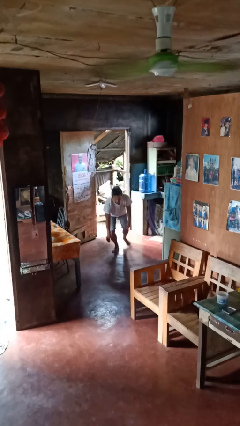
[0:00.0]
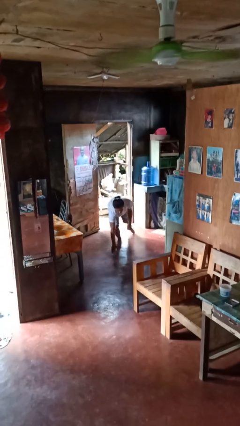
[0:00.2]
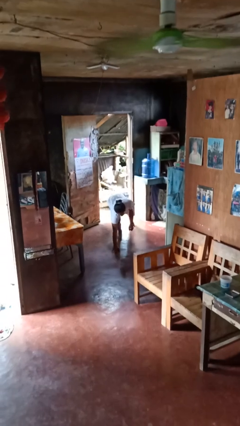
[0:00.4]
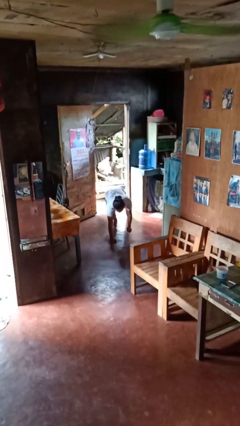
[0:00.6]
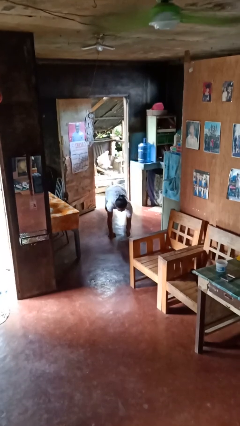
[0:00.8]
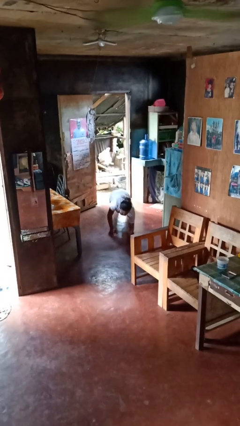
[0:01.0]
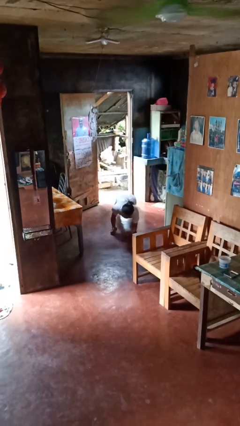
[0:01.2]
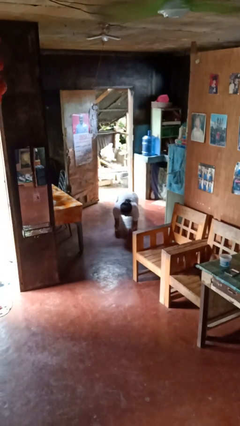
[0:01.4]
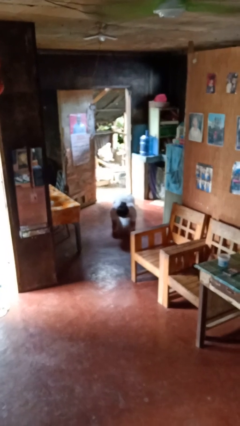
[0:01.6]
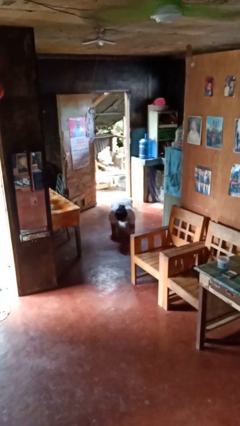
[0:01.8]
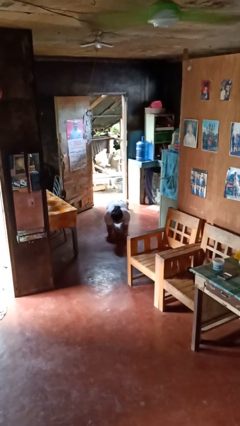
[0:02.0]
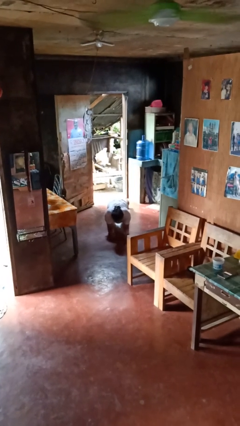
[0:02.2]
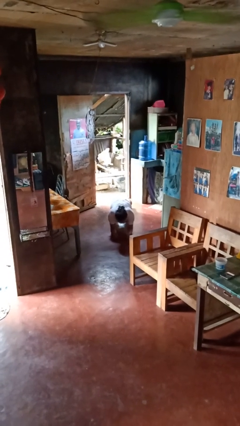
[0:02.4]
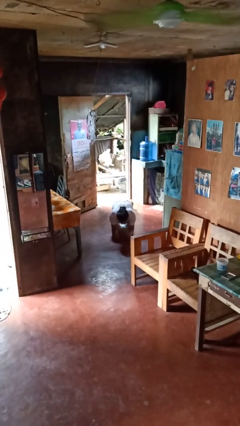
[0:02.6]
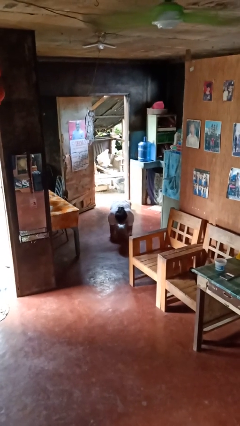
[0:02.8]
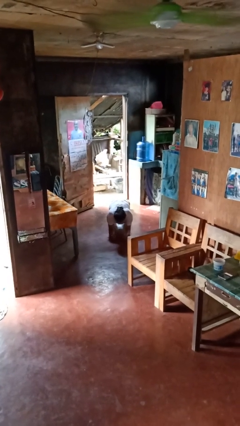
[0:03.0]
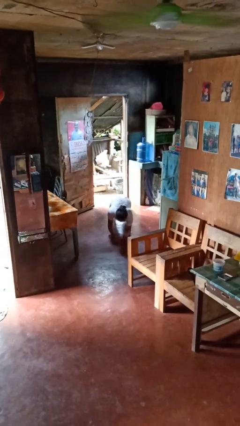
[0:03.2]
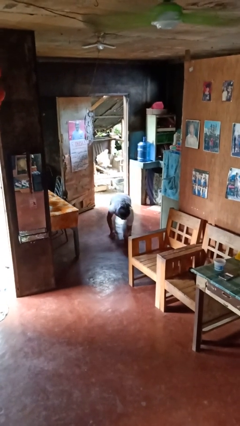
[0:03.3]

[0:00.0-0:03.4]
person exercises with plank

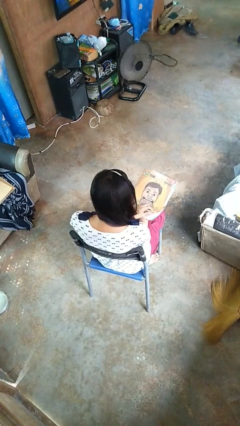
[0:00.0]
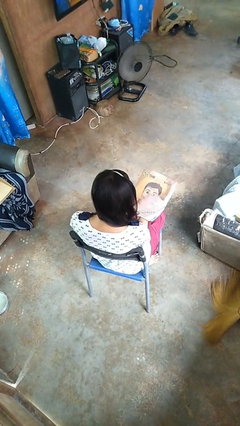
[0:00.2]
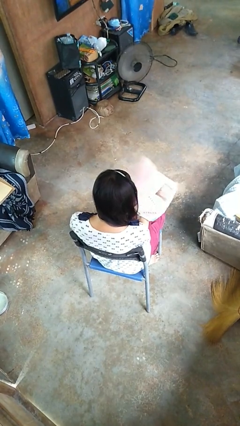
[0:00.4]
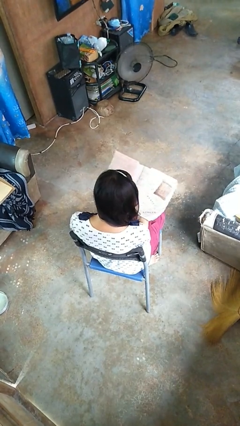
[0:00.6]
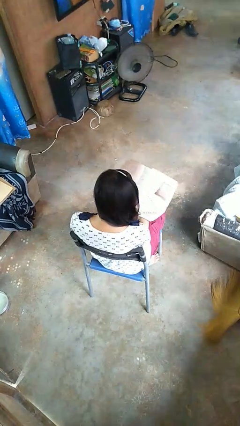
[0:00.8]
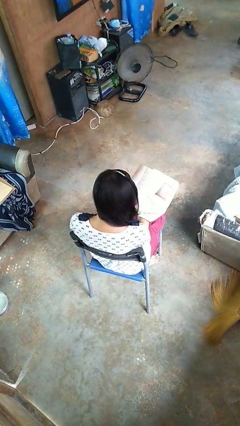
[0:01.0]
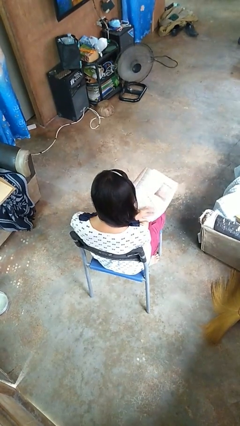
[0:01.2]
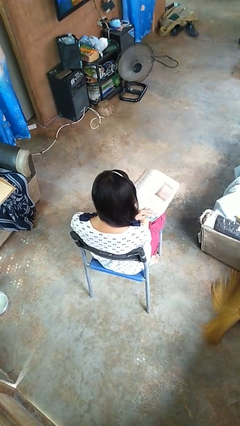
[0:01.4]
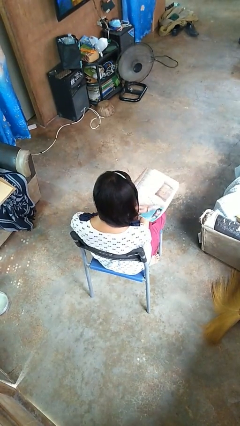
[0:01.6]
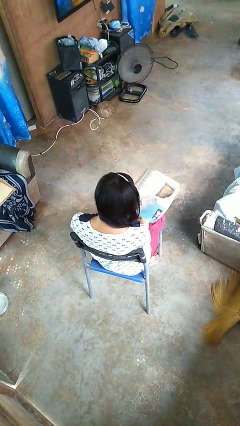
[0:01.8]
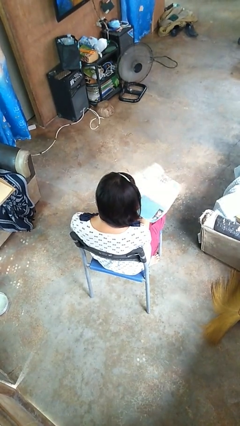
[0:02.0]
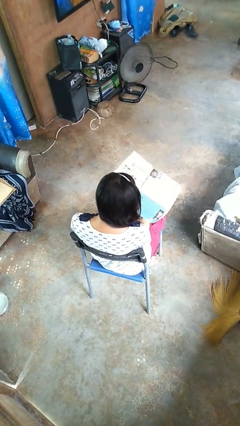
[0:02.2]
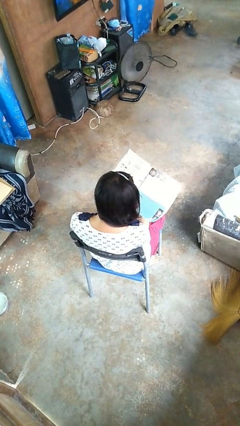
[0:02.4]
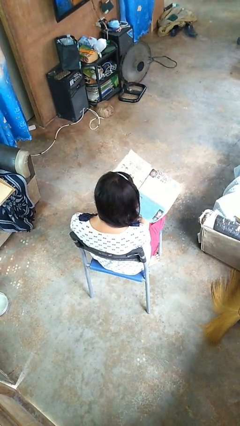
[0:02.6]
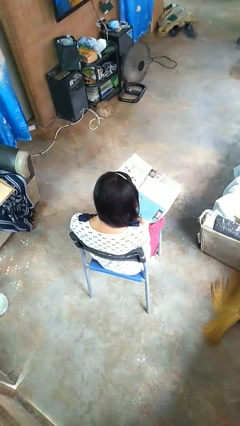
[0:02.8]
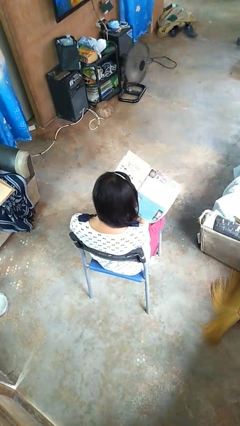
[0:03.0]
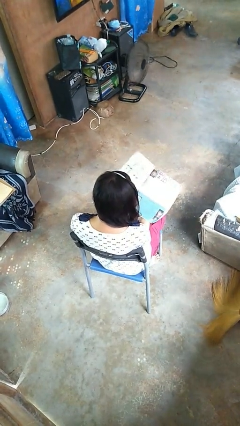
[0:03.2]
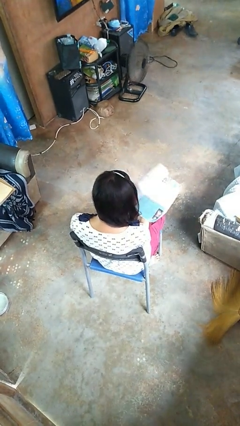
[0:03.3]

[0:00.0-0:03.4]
person reads magazine

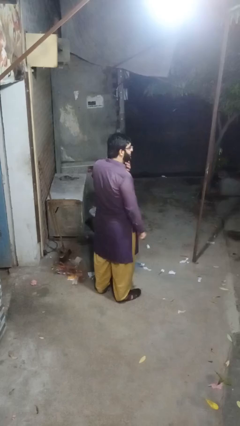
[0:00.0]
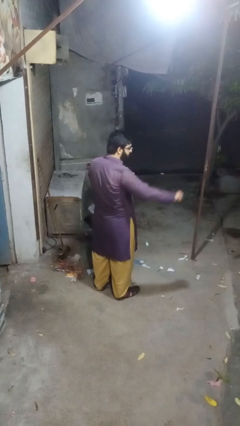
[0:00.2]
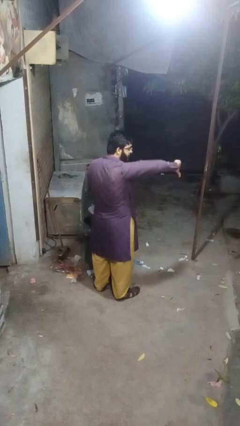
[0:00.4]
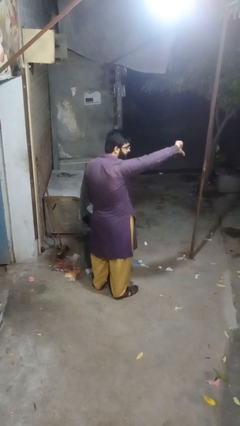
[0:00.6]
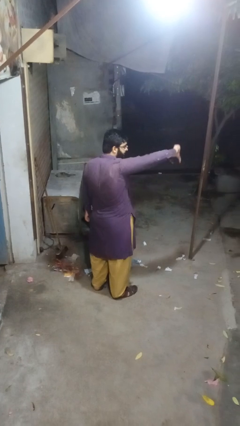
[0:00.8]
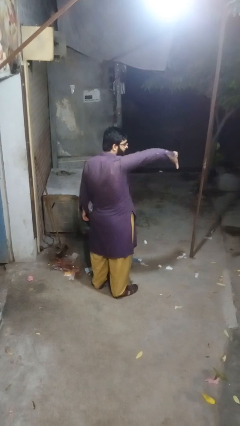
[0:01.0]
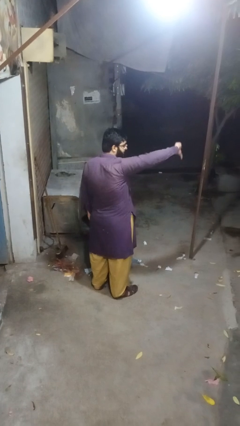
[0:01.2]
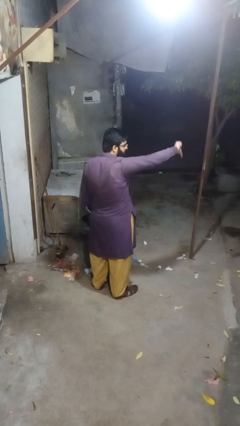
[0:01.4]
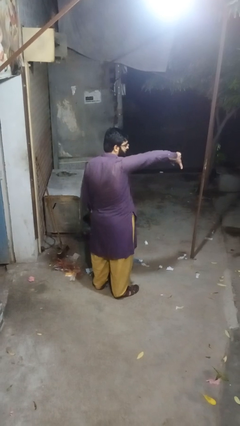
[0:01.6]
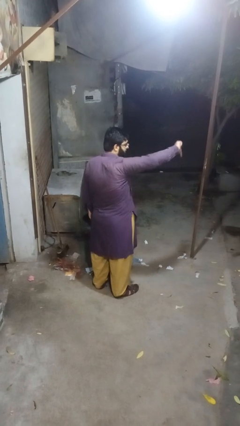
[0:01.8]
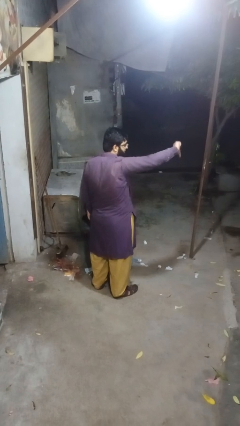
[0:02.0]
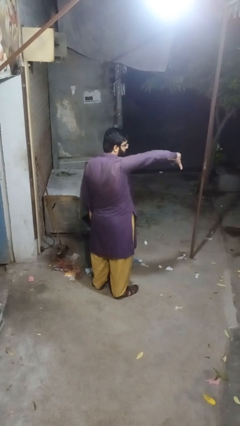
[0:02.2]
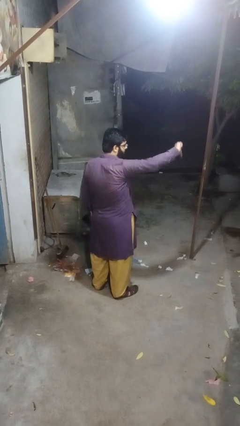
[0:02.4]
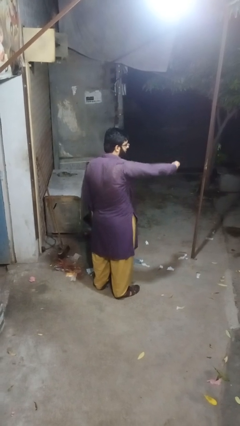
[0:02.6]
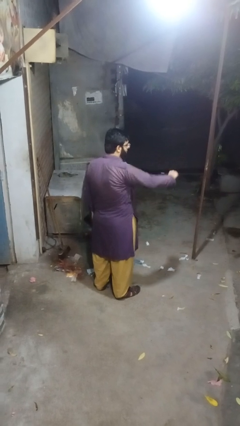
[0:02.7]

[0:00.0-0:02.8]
person gestures thumbs down

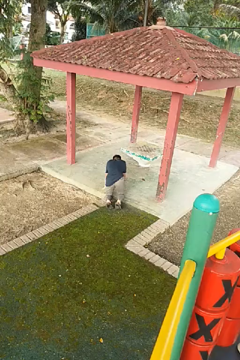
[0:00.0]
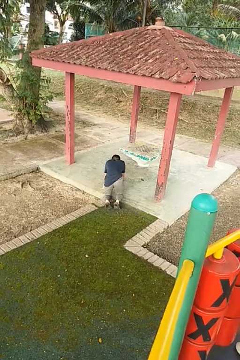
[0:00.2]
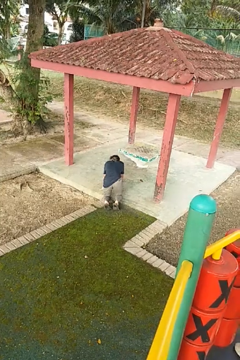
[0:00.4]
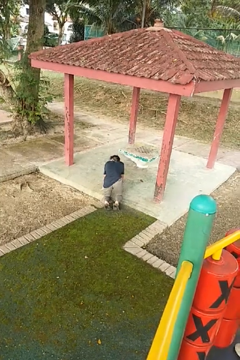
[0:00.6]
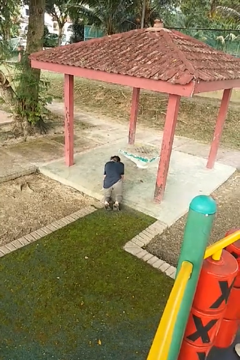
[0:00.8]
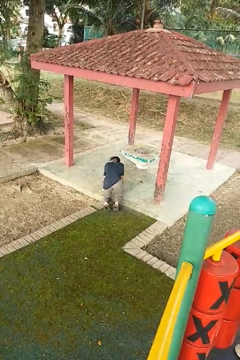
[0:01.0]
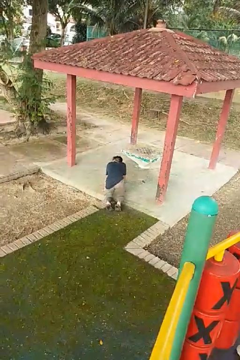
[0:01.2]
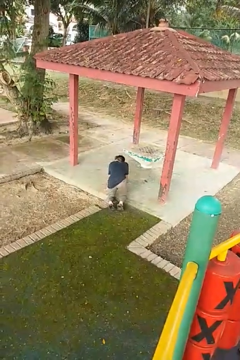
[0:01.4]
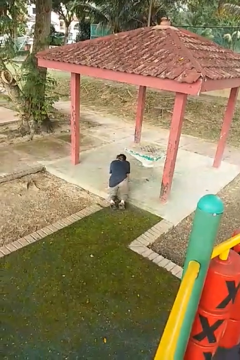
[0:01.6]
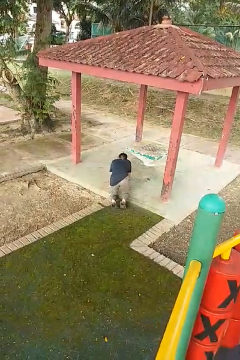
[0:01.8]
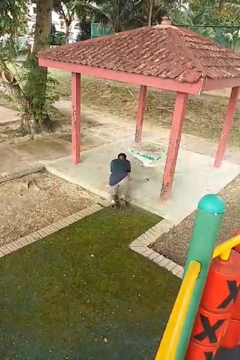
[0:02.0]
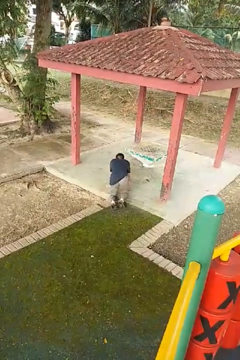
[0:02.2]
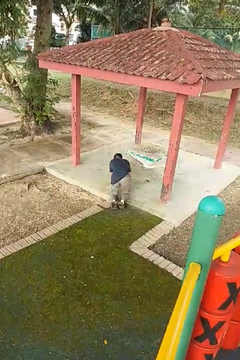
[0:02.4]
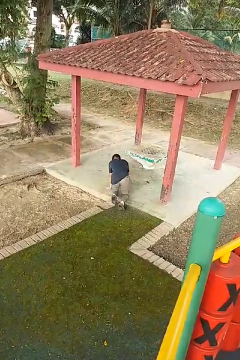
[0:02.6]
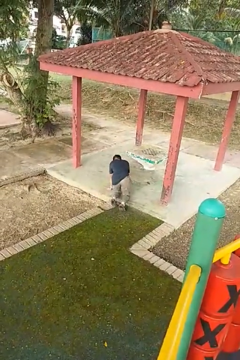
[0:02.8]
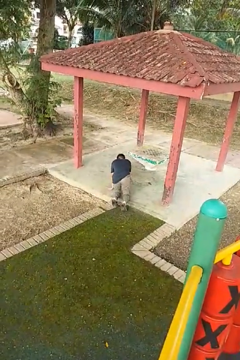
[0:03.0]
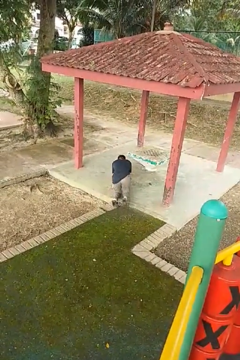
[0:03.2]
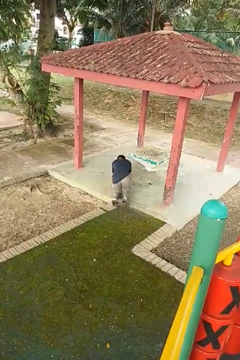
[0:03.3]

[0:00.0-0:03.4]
person crawls

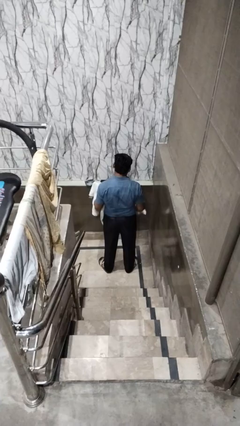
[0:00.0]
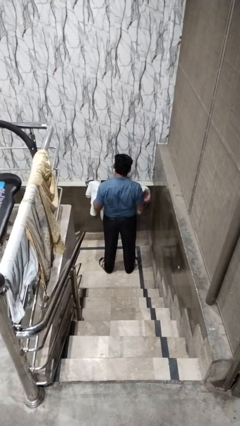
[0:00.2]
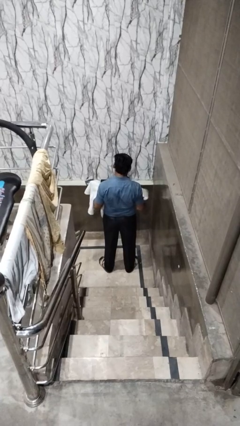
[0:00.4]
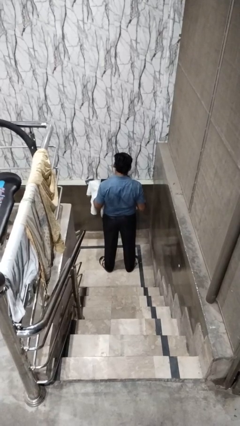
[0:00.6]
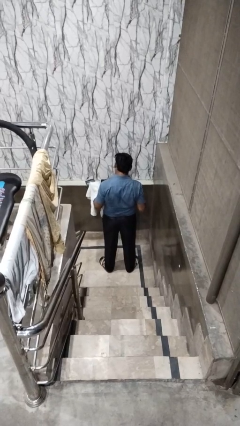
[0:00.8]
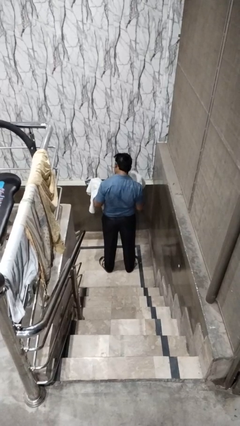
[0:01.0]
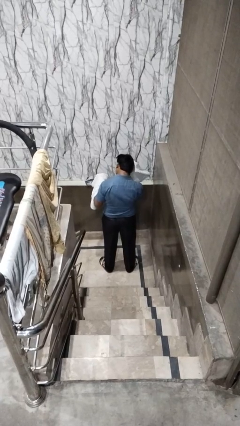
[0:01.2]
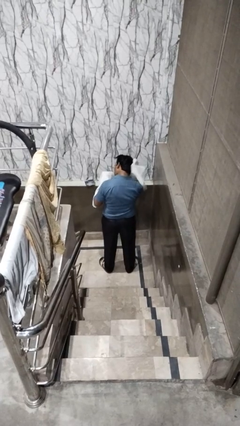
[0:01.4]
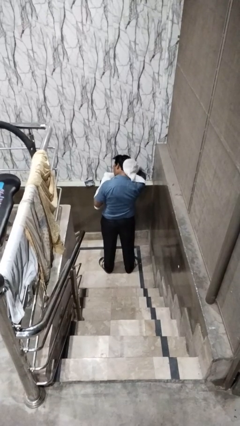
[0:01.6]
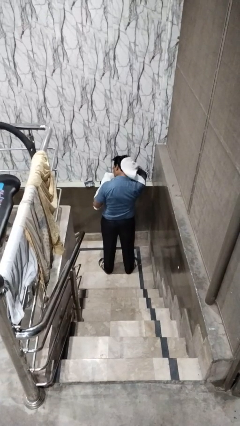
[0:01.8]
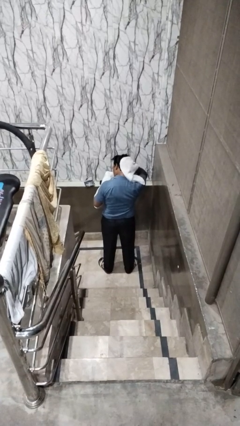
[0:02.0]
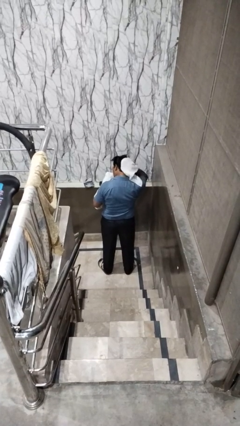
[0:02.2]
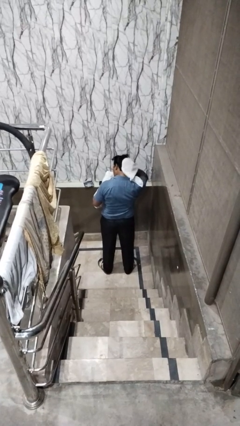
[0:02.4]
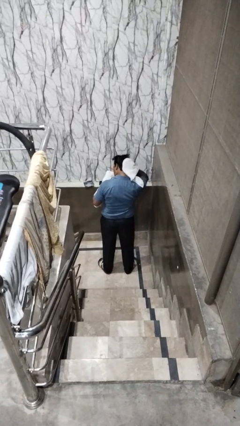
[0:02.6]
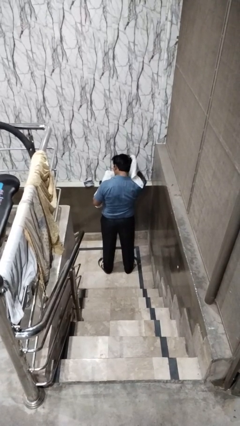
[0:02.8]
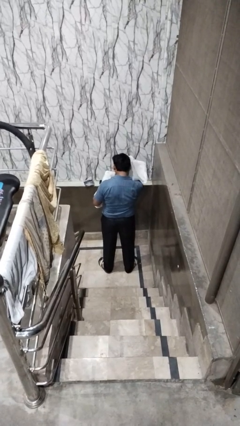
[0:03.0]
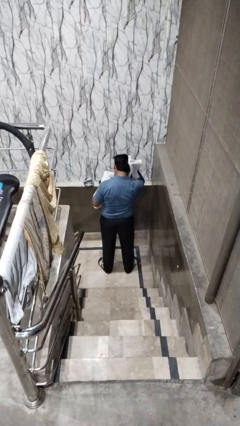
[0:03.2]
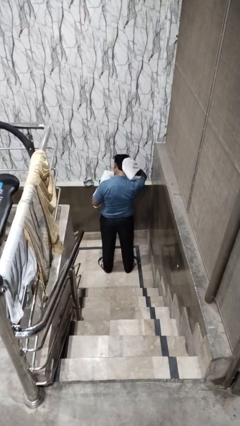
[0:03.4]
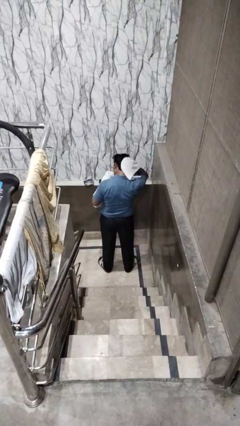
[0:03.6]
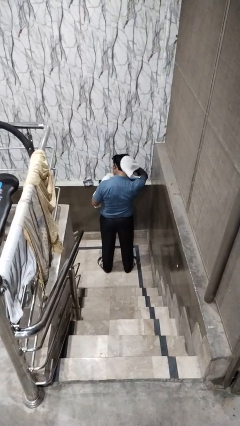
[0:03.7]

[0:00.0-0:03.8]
person dries hair with towel

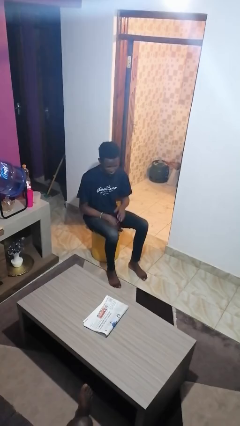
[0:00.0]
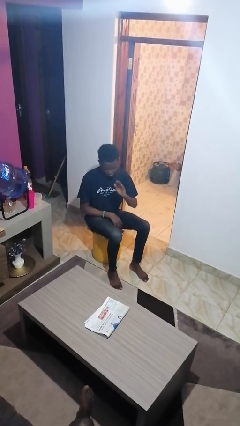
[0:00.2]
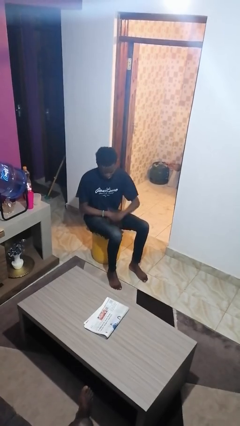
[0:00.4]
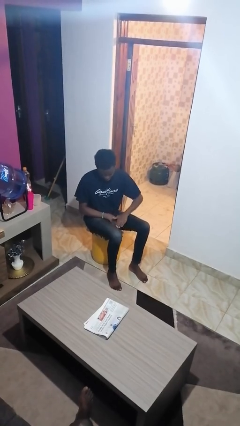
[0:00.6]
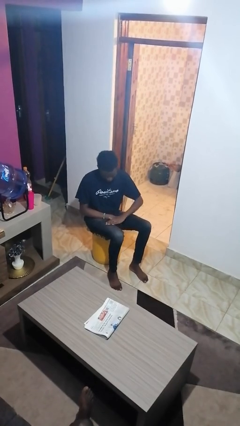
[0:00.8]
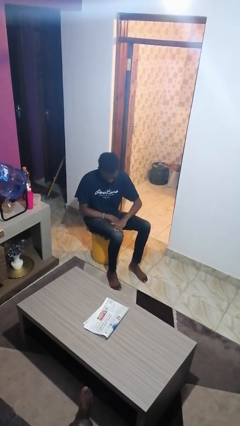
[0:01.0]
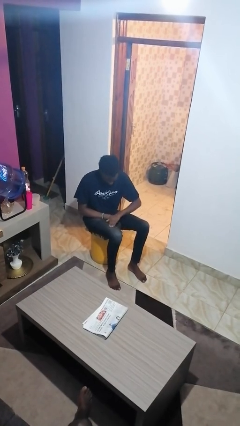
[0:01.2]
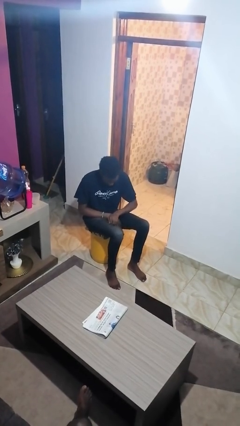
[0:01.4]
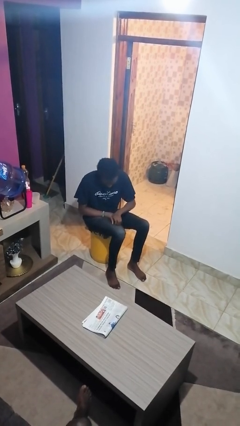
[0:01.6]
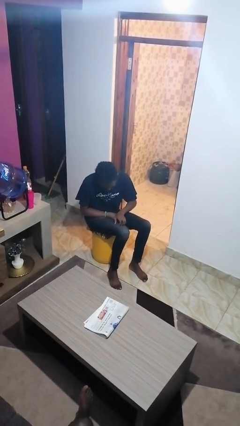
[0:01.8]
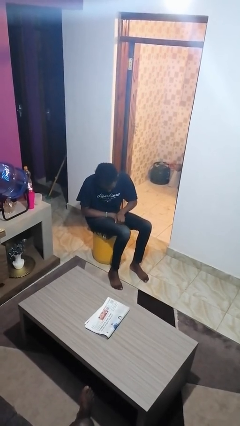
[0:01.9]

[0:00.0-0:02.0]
person swats bug
